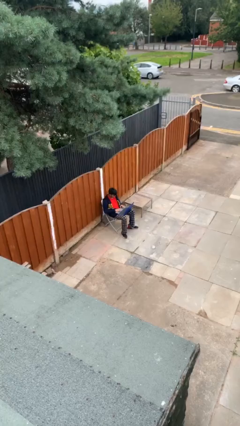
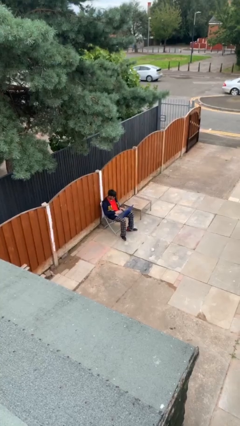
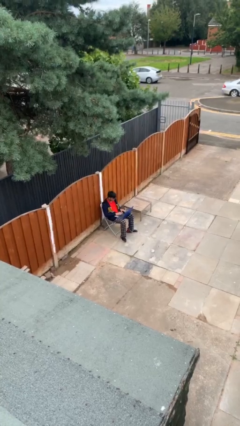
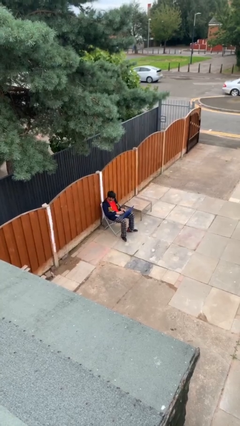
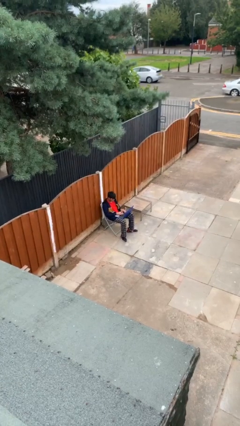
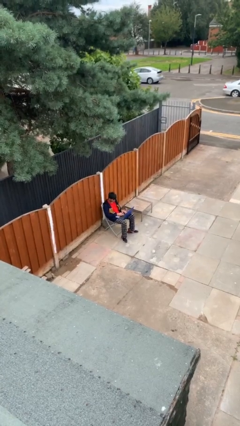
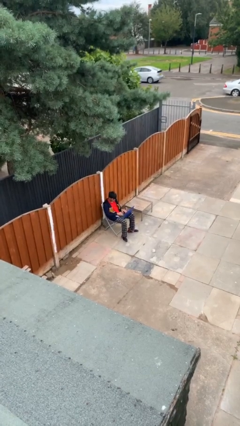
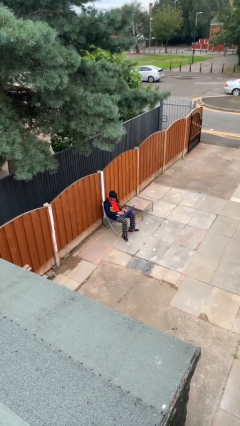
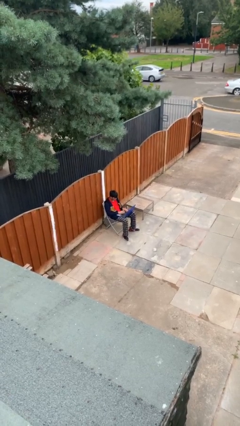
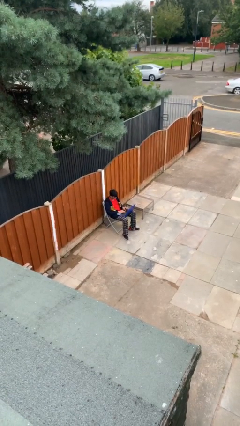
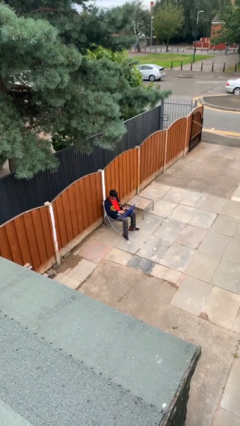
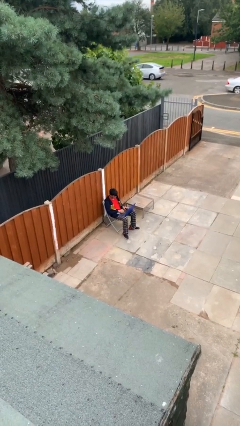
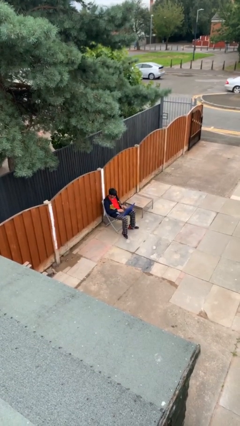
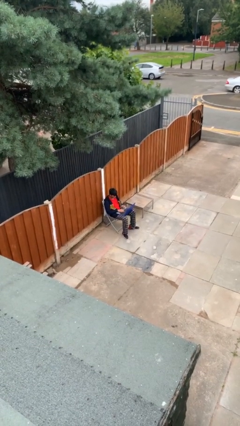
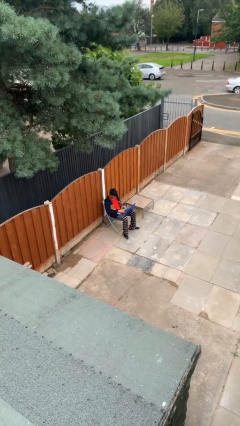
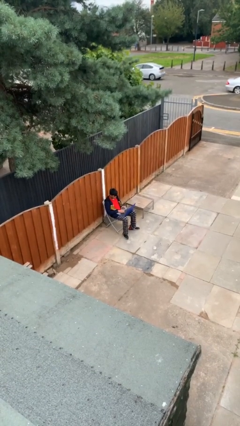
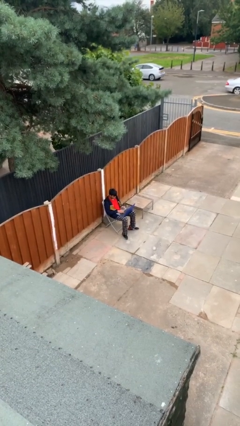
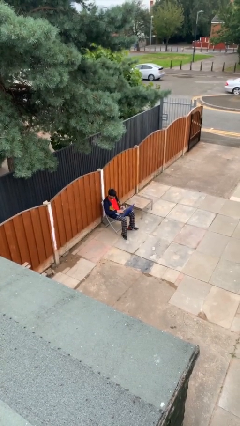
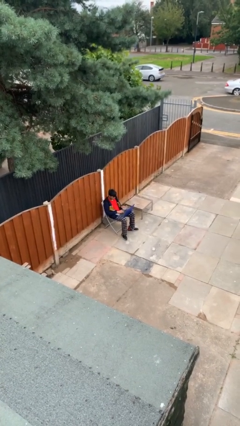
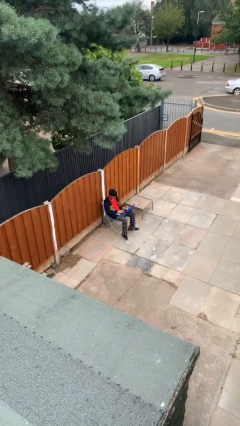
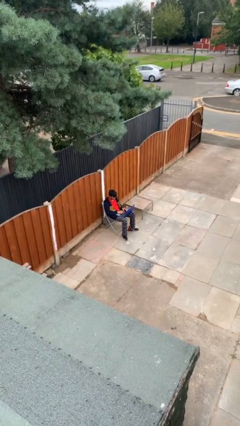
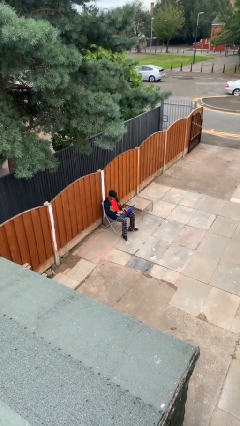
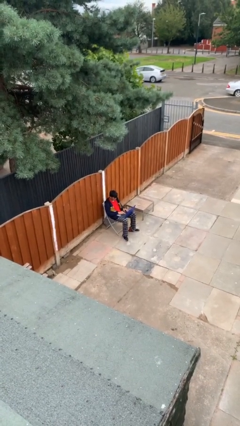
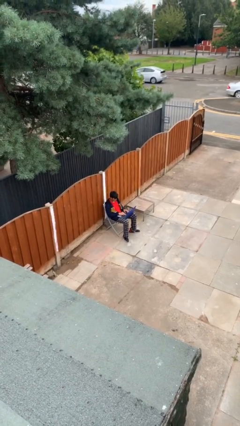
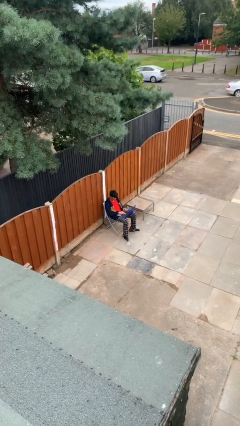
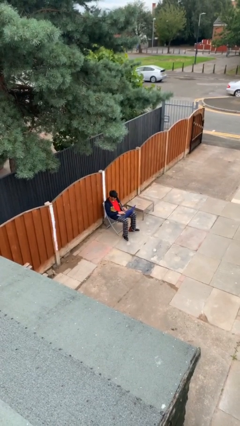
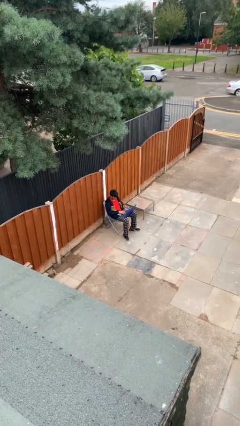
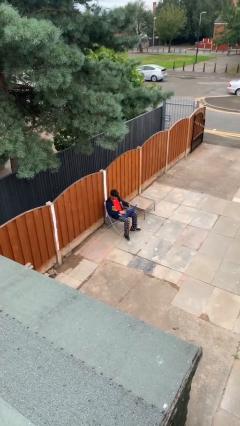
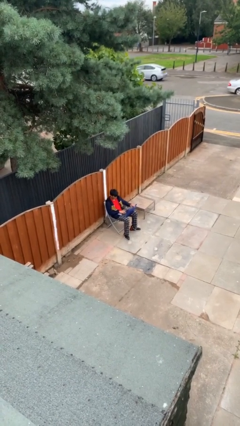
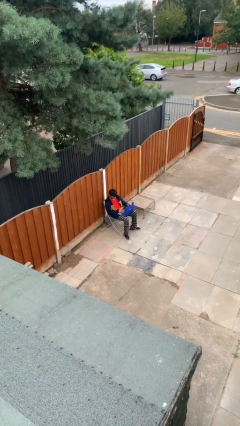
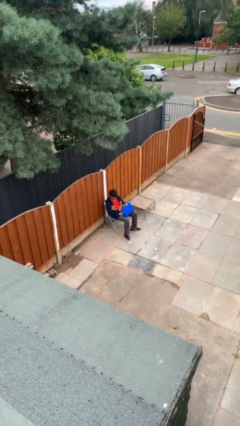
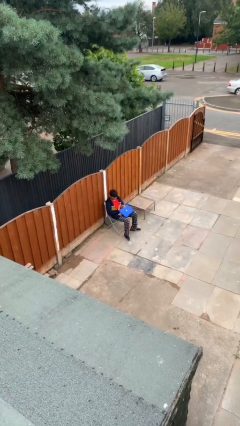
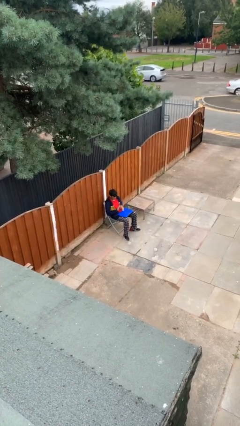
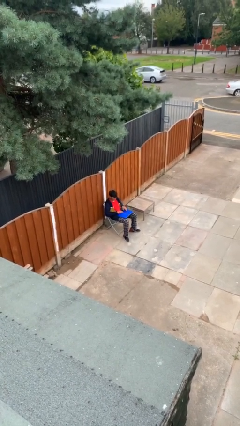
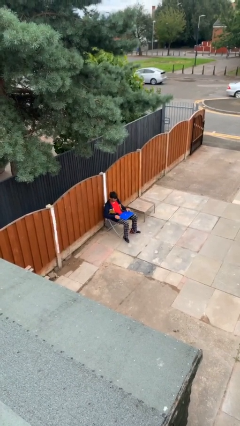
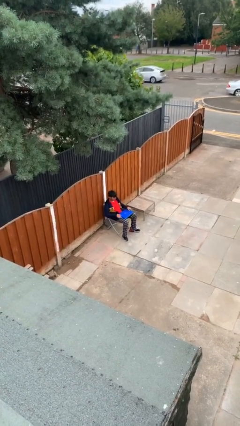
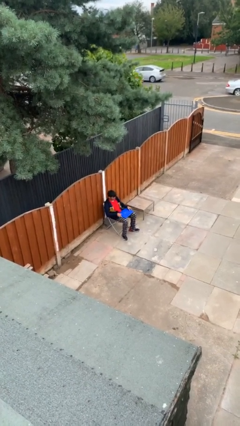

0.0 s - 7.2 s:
person interacts with laptop

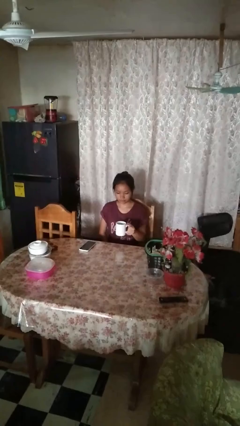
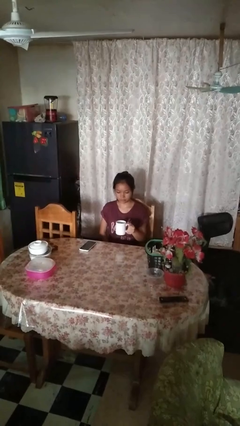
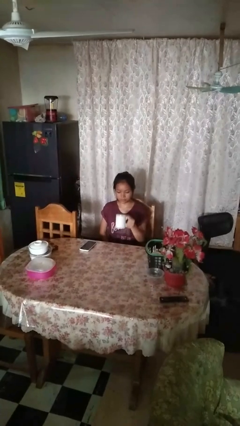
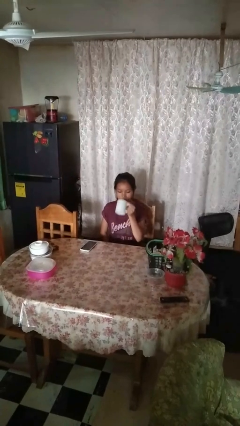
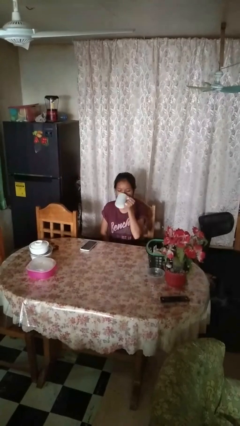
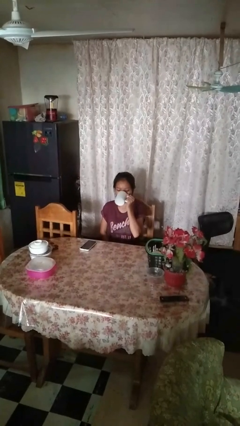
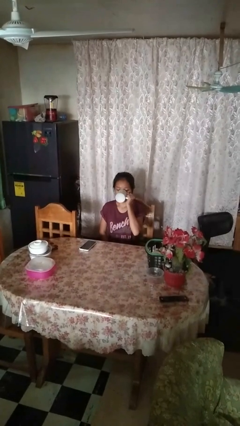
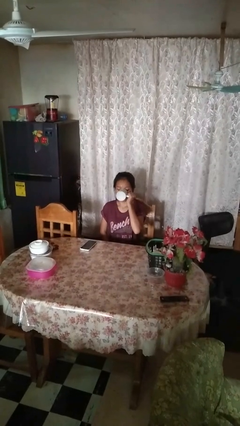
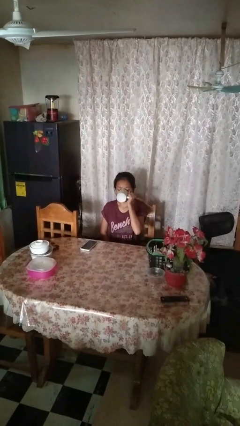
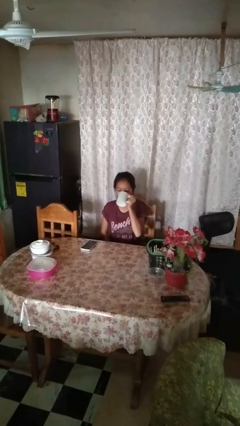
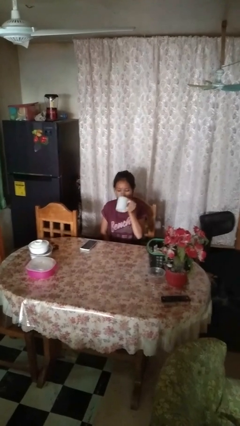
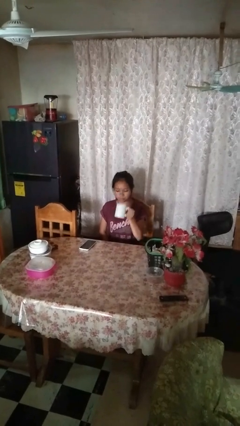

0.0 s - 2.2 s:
person drinks from mug

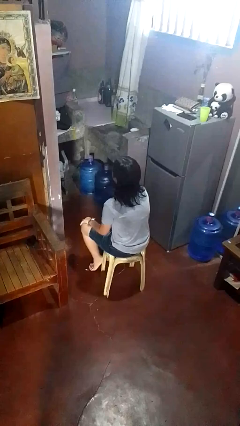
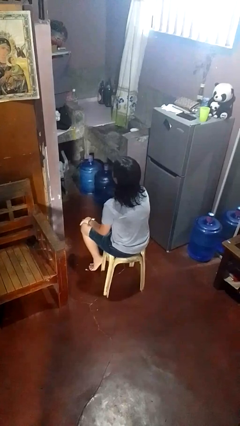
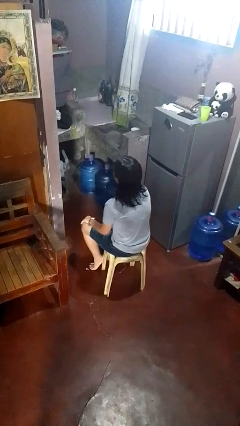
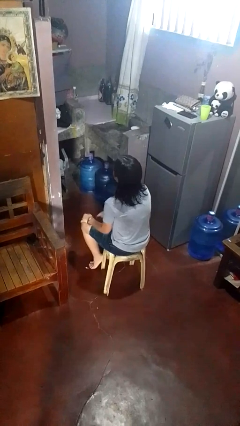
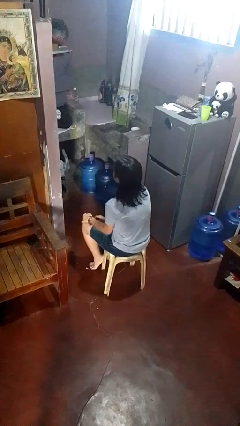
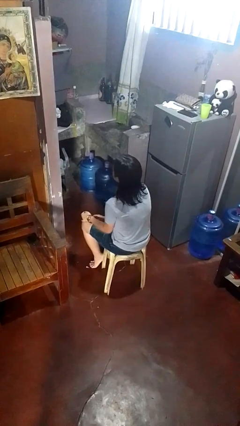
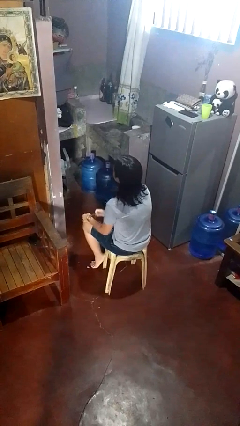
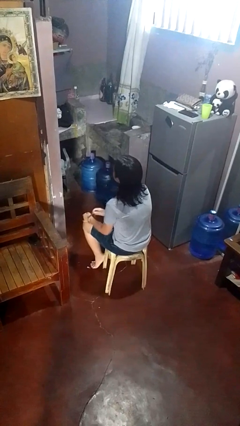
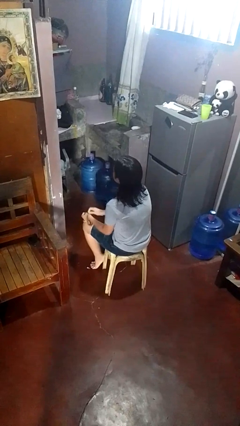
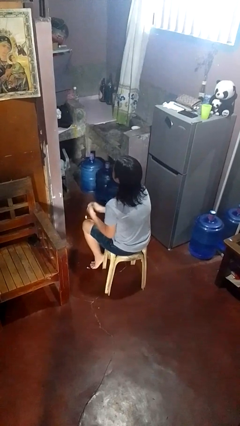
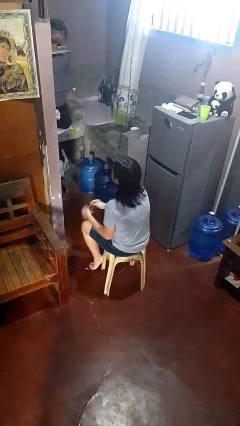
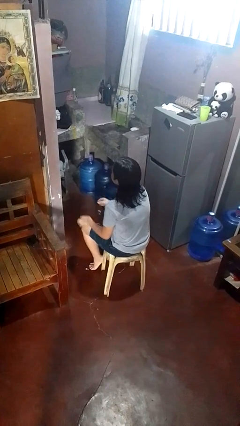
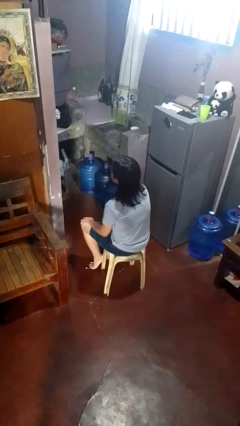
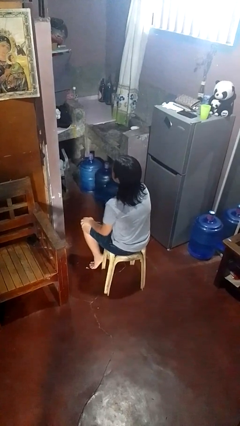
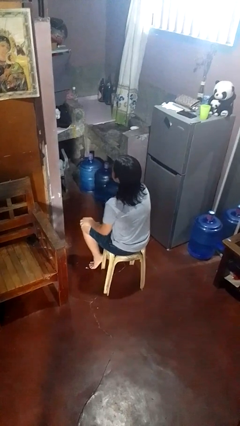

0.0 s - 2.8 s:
person takes off wristwatch

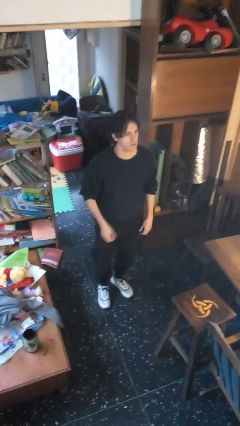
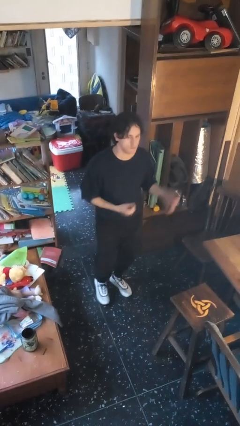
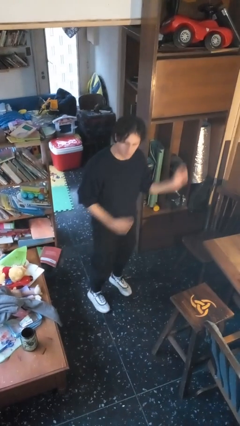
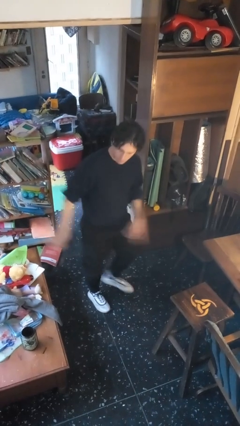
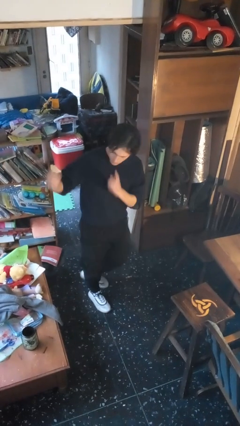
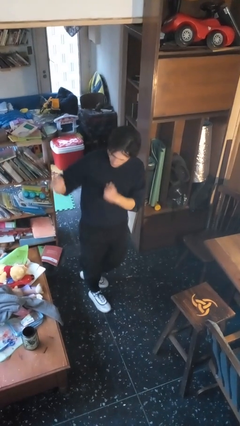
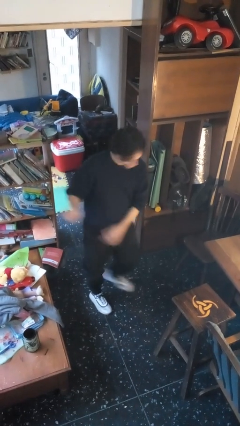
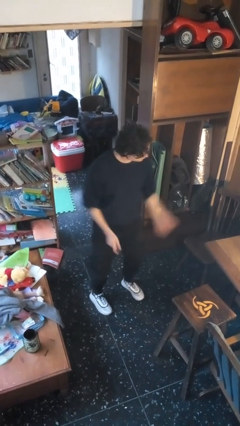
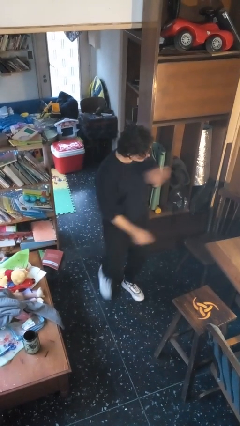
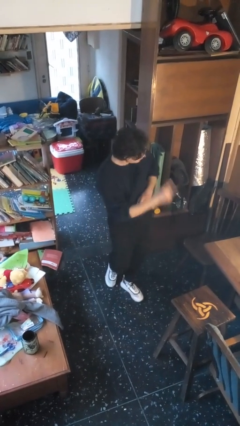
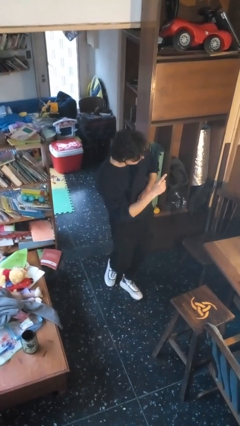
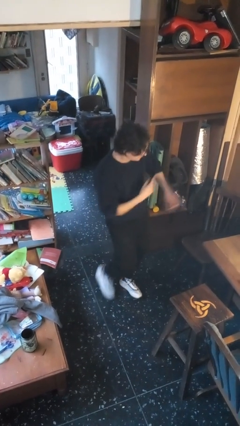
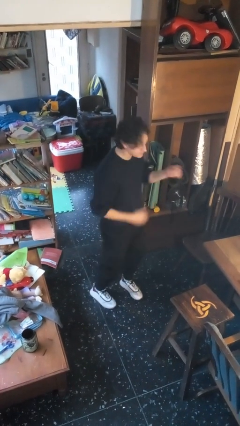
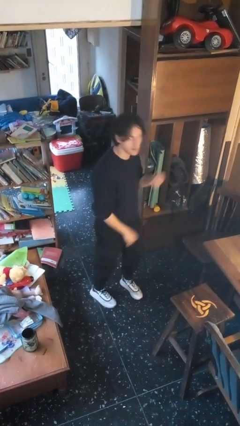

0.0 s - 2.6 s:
person dances in place

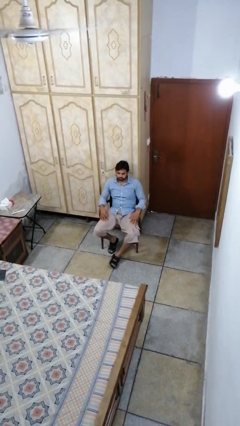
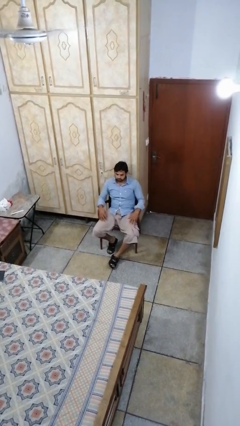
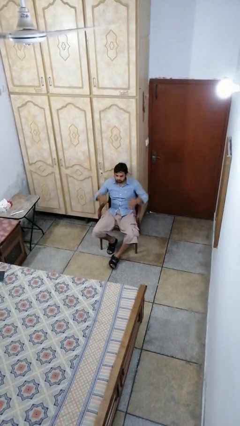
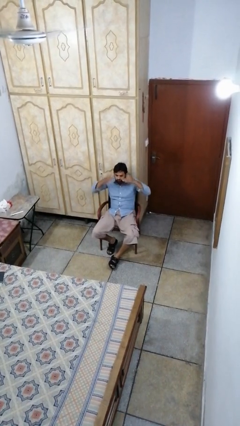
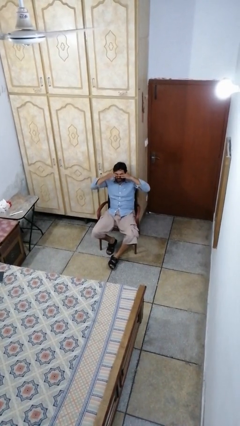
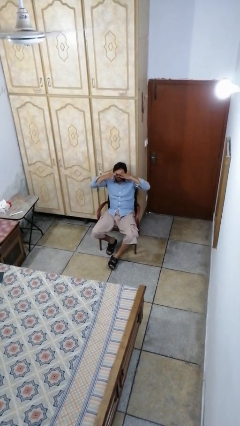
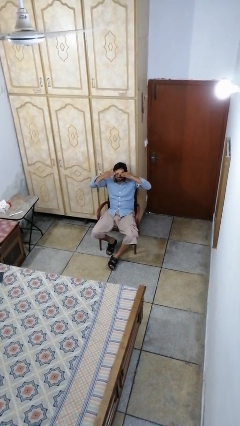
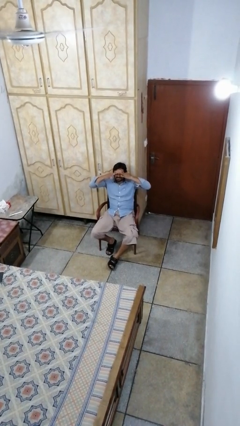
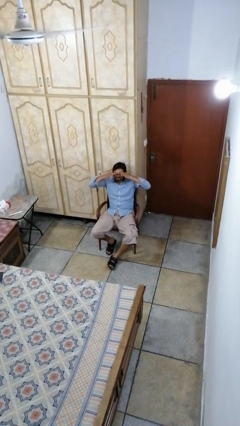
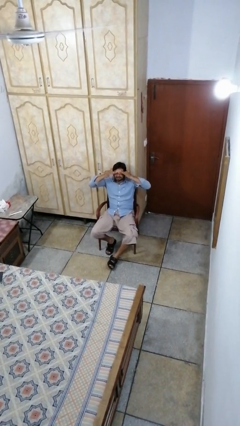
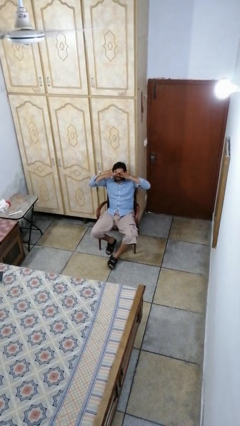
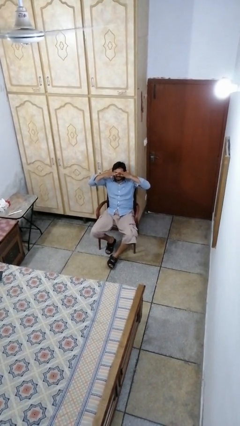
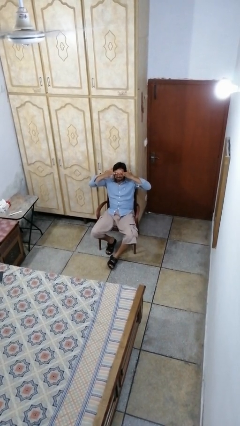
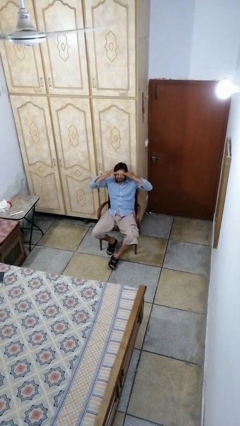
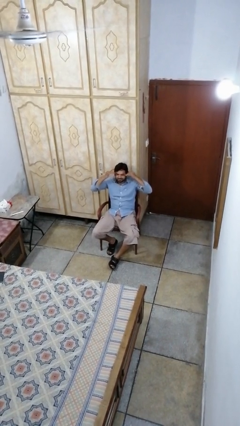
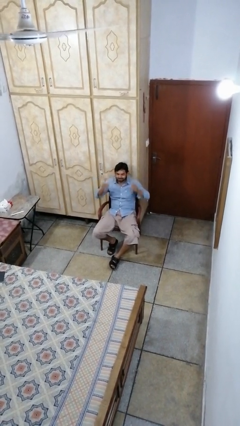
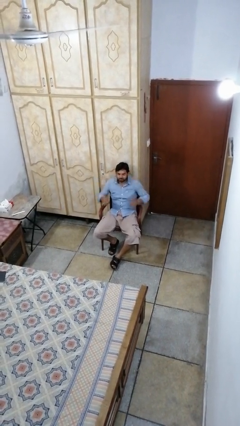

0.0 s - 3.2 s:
person rubs eyes
